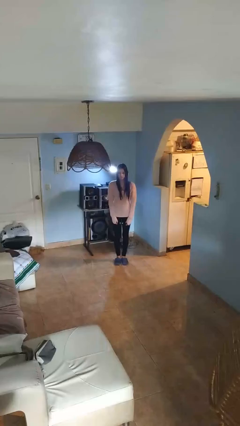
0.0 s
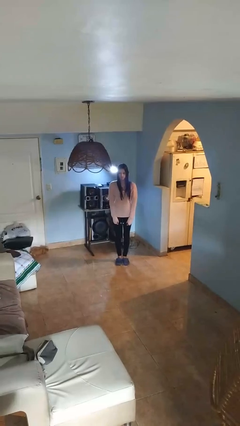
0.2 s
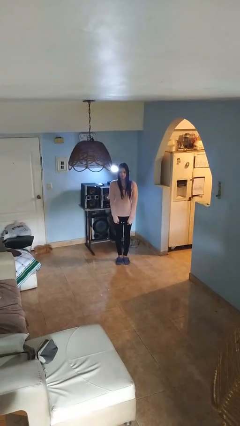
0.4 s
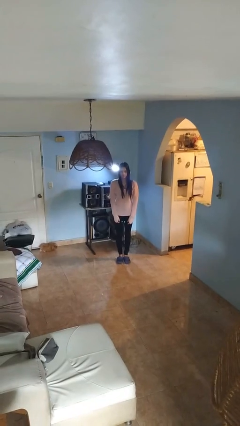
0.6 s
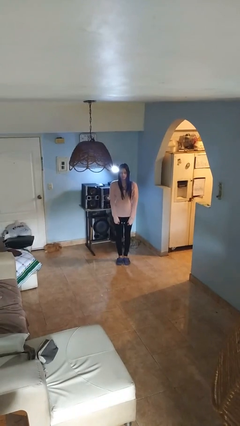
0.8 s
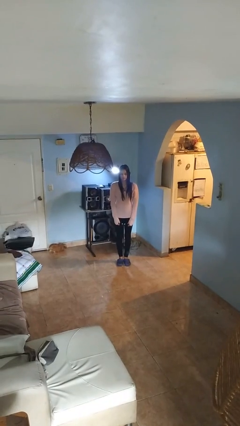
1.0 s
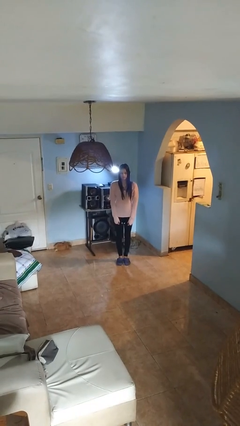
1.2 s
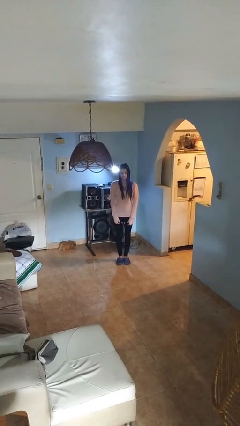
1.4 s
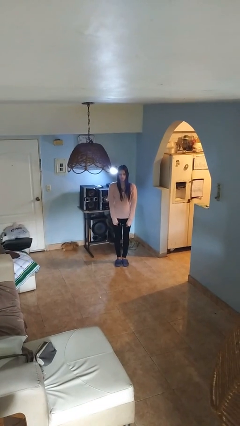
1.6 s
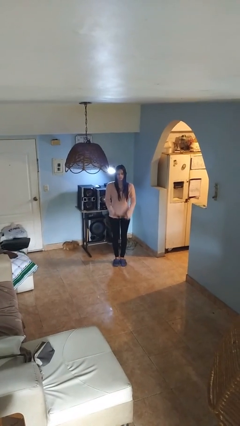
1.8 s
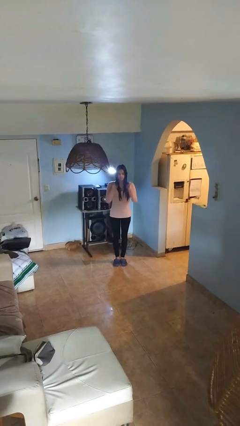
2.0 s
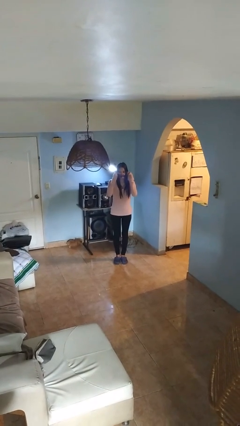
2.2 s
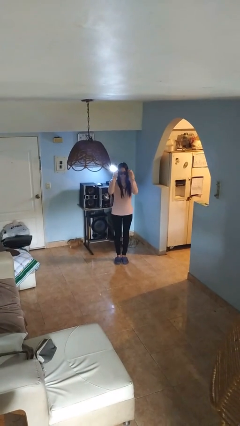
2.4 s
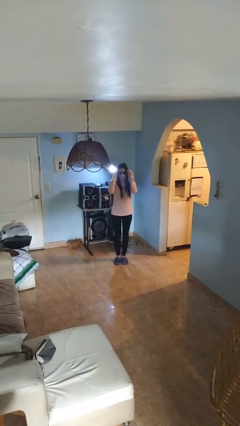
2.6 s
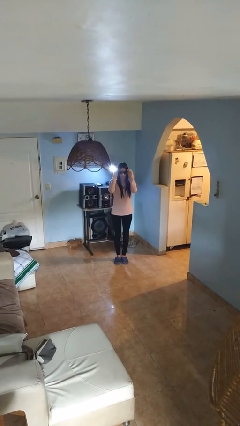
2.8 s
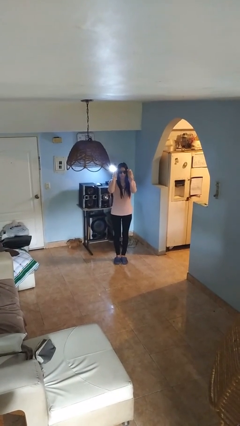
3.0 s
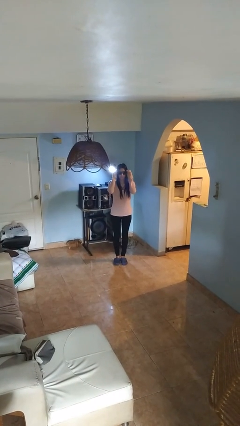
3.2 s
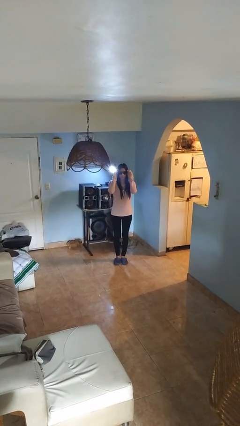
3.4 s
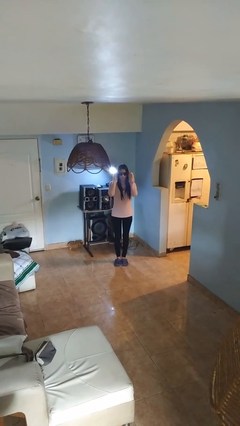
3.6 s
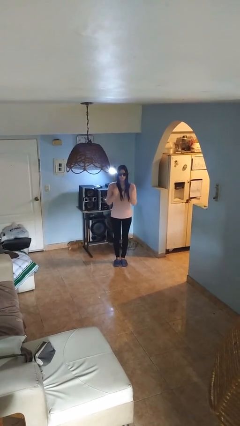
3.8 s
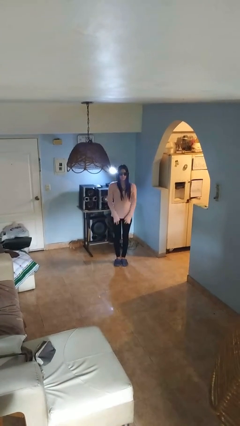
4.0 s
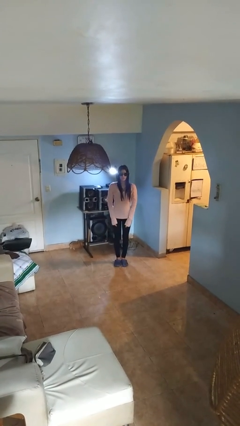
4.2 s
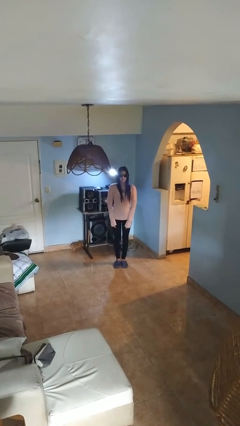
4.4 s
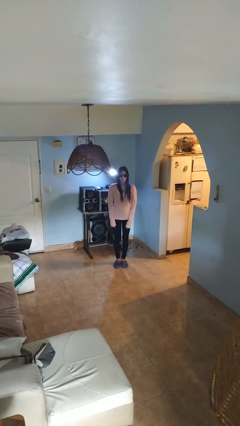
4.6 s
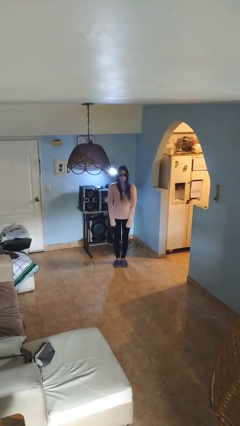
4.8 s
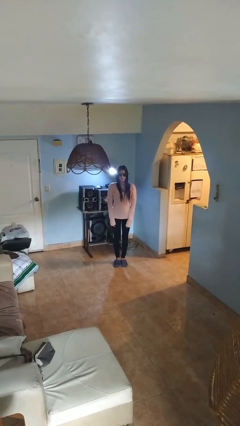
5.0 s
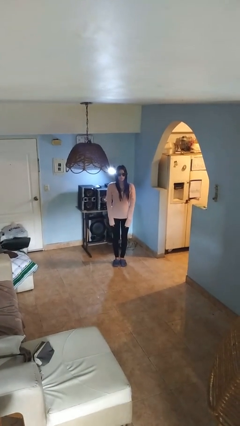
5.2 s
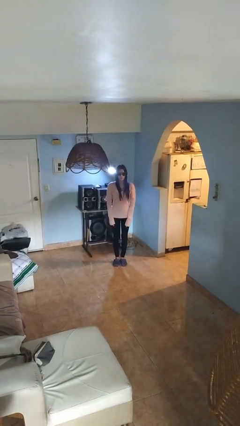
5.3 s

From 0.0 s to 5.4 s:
person puts on sunglasses

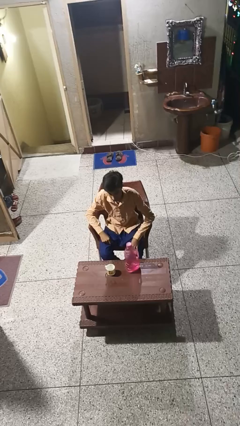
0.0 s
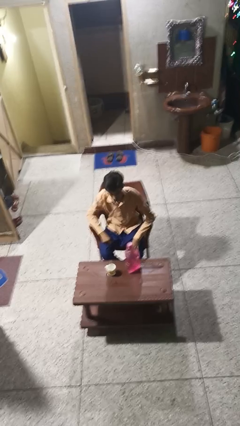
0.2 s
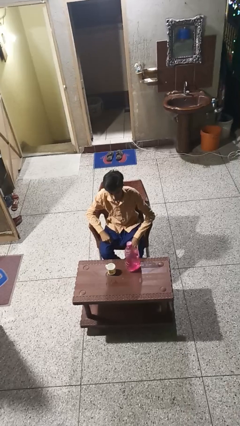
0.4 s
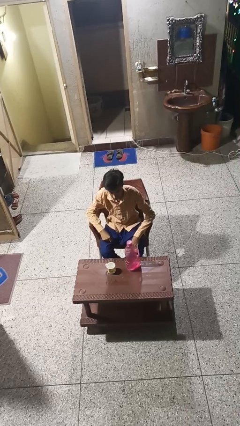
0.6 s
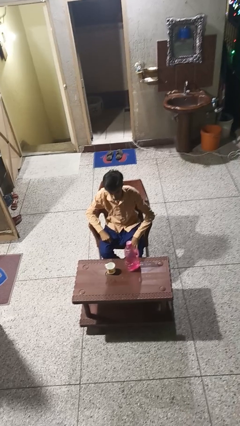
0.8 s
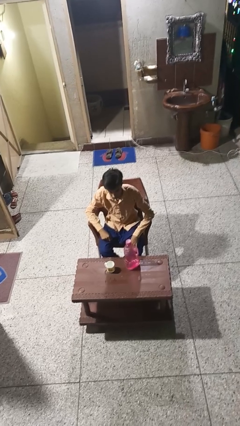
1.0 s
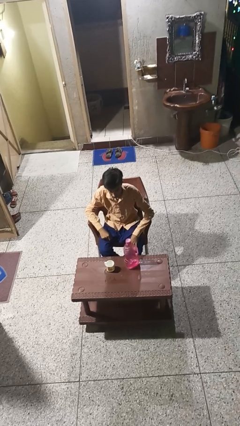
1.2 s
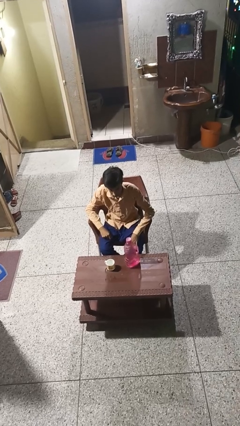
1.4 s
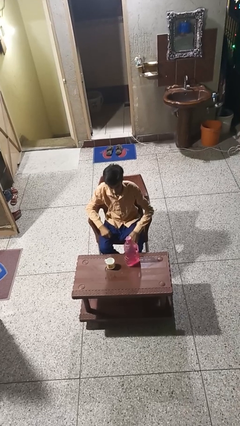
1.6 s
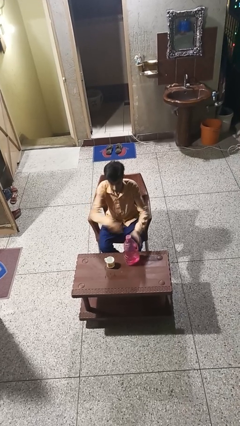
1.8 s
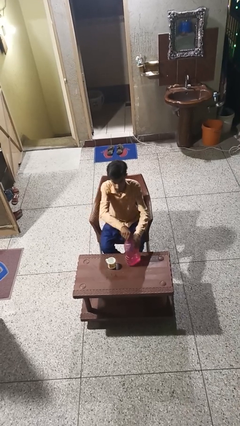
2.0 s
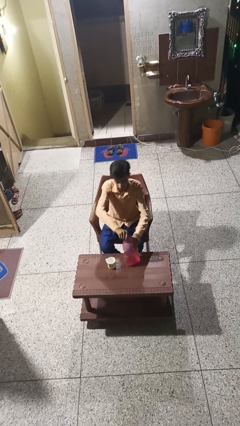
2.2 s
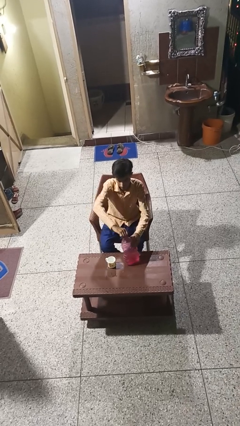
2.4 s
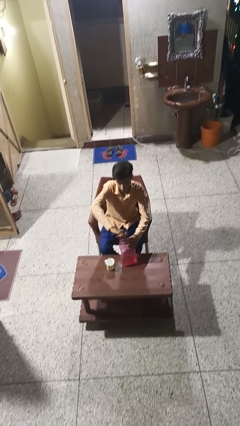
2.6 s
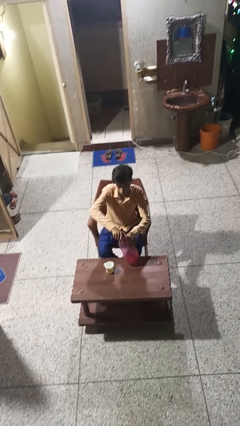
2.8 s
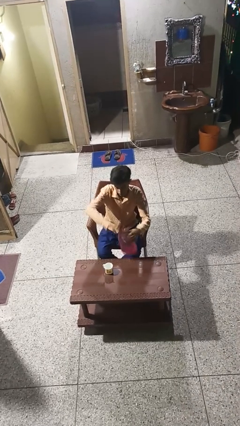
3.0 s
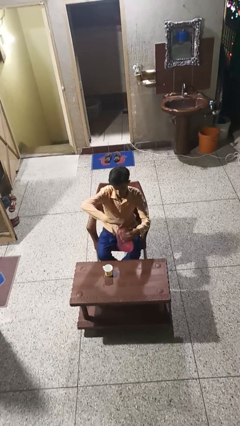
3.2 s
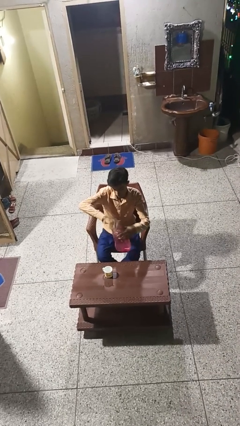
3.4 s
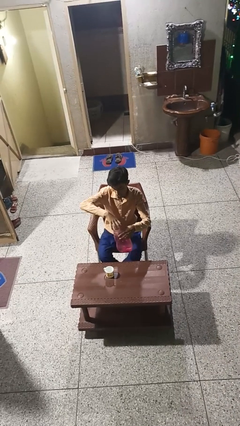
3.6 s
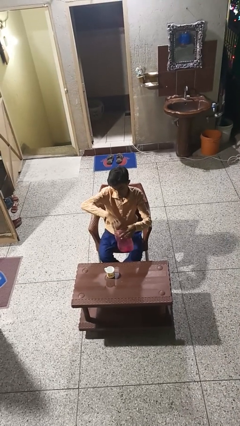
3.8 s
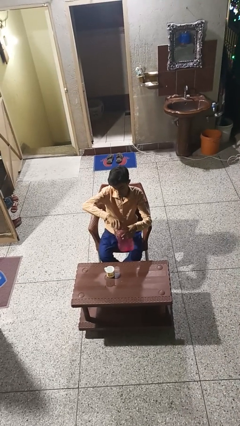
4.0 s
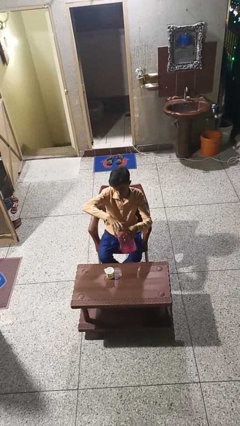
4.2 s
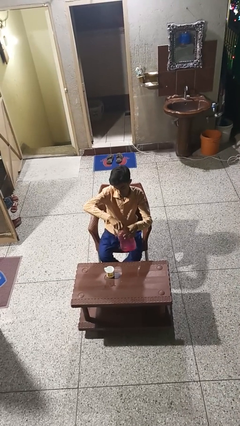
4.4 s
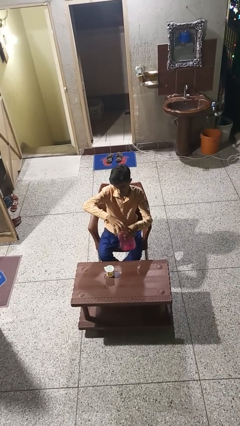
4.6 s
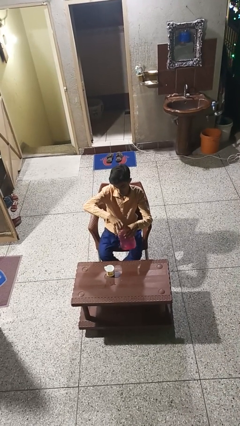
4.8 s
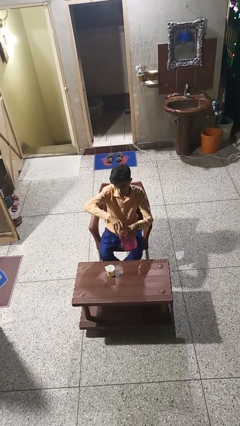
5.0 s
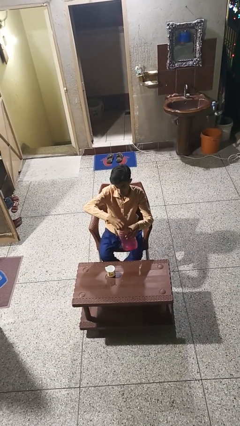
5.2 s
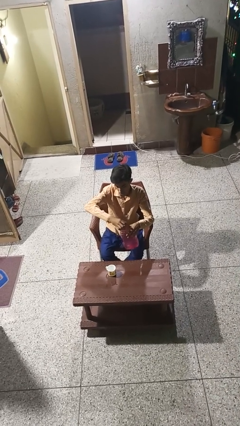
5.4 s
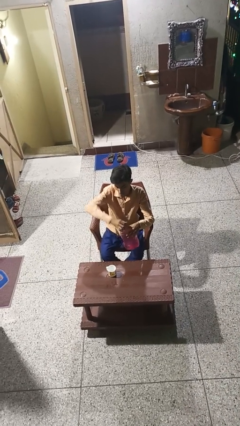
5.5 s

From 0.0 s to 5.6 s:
person unscrews lid from bottle

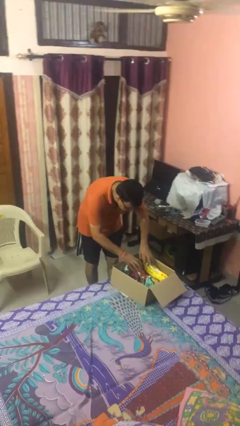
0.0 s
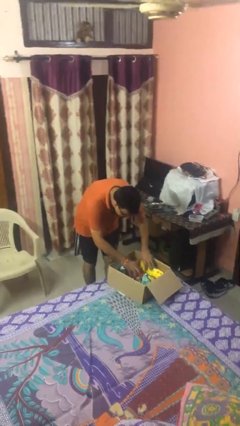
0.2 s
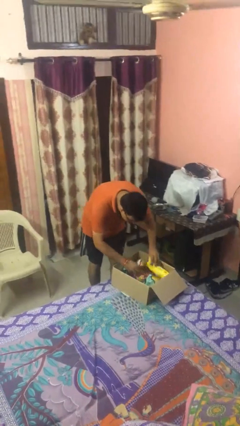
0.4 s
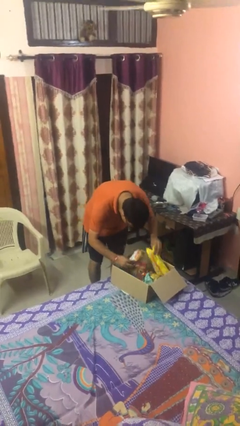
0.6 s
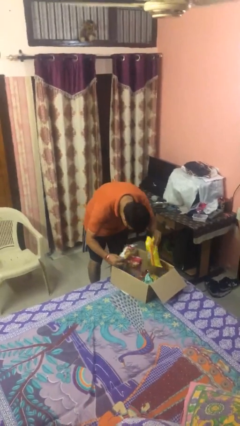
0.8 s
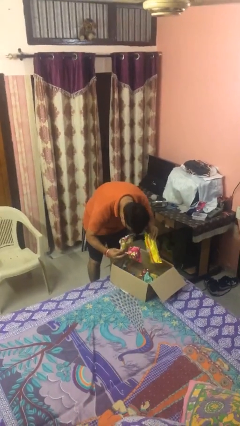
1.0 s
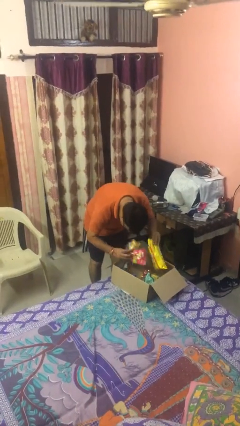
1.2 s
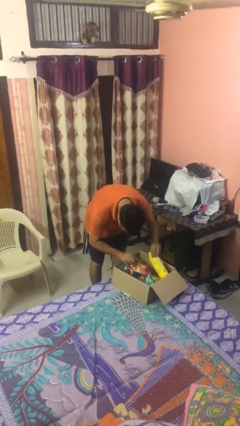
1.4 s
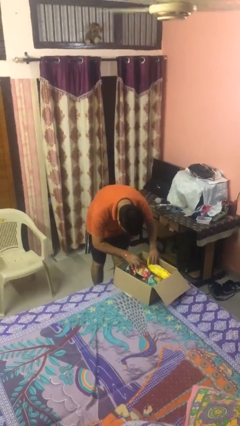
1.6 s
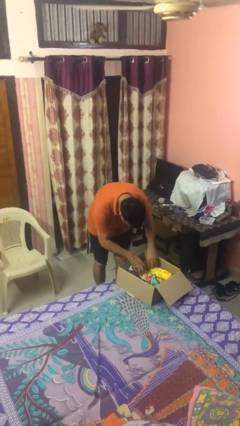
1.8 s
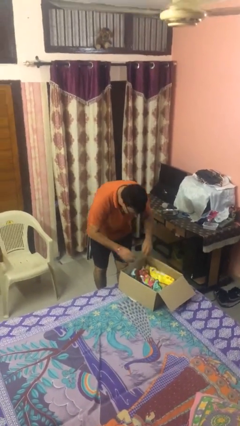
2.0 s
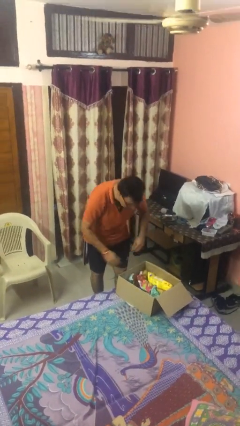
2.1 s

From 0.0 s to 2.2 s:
person searches in box

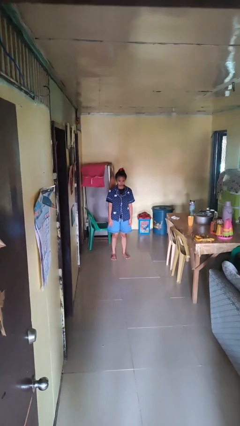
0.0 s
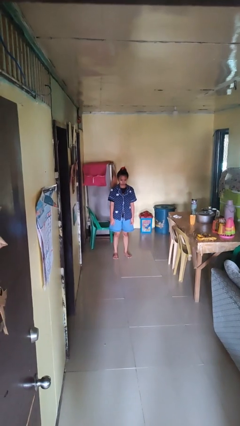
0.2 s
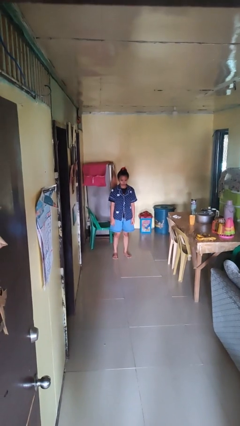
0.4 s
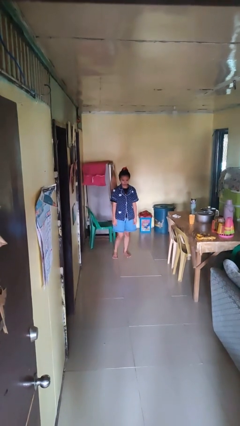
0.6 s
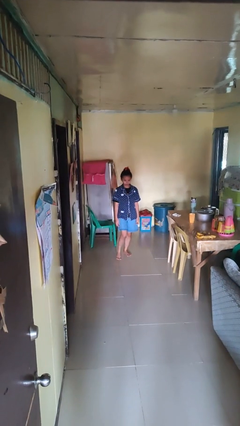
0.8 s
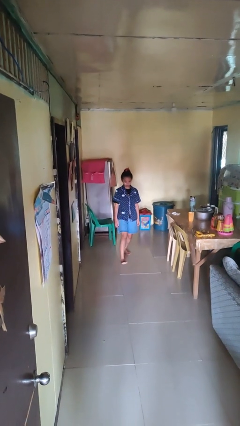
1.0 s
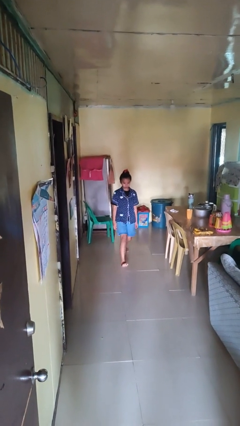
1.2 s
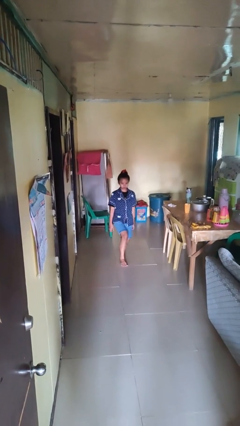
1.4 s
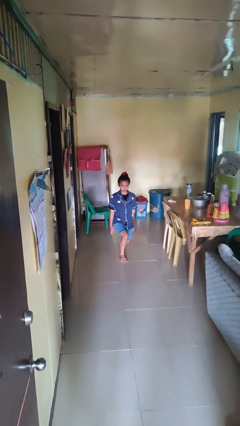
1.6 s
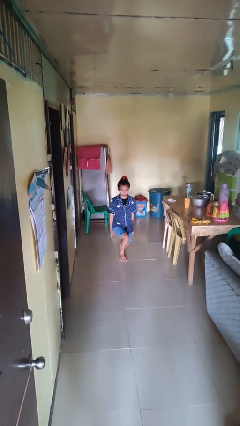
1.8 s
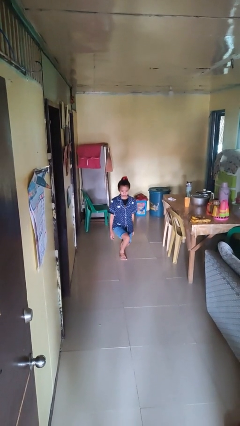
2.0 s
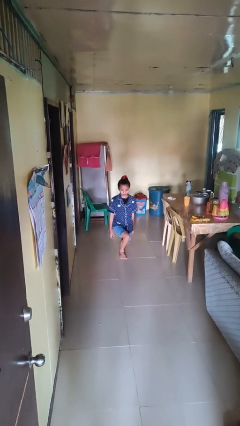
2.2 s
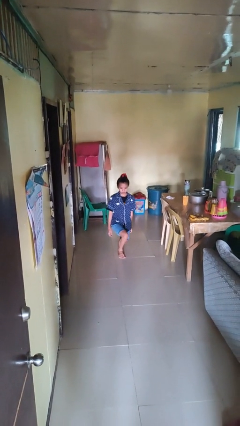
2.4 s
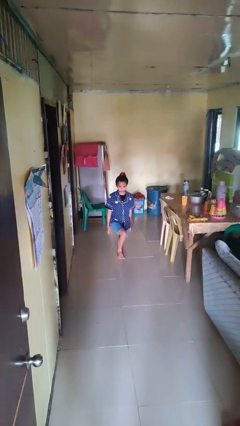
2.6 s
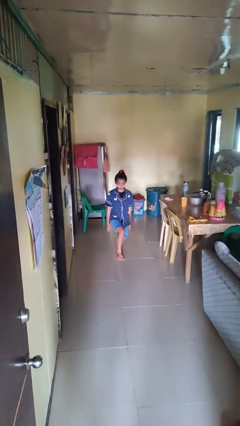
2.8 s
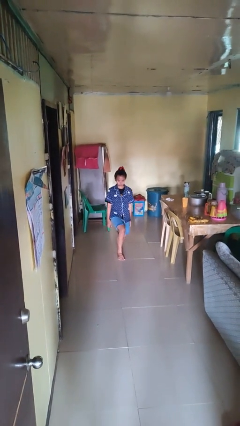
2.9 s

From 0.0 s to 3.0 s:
person exercises with lunges

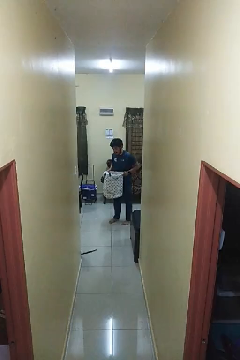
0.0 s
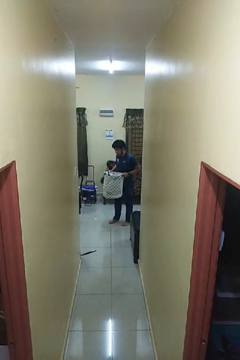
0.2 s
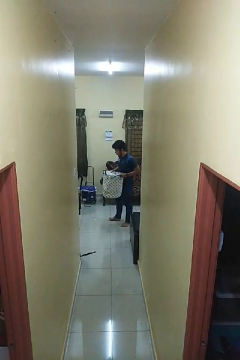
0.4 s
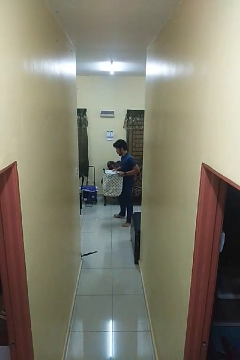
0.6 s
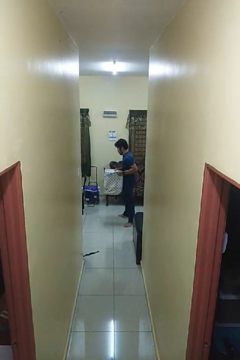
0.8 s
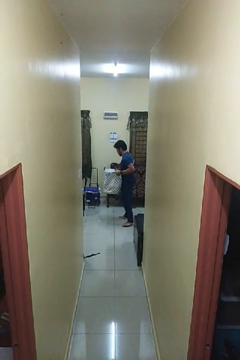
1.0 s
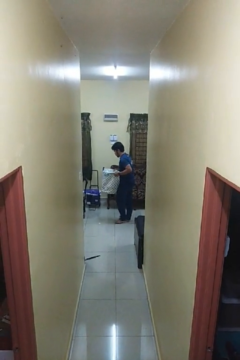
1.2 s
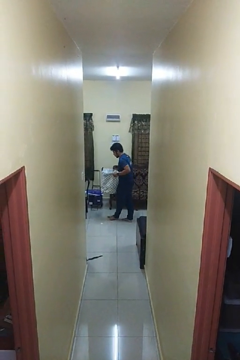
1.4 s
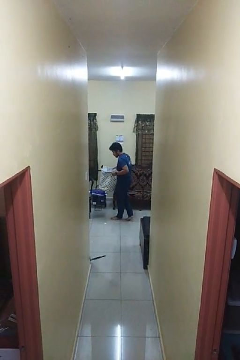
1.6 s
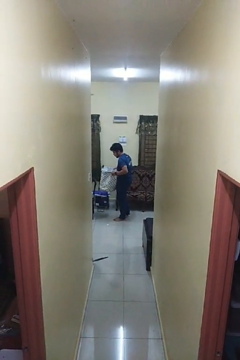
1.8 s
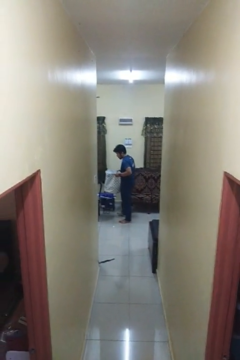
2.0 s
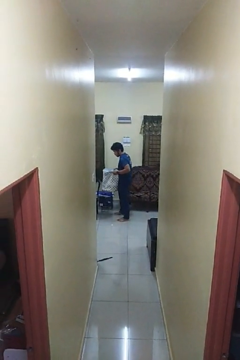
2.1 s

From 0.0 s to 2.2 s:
person carries laundry basket
